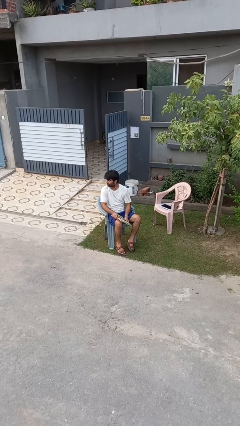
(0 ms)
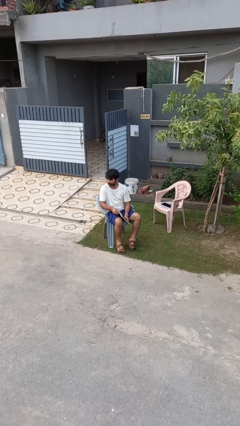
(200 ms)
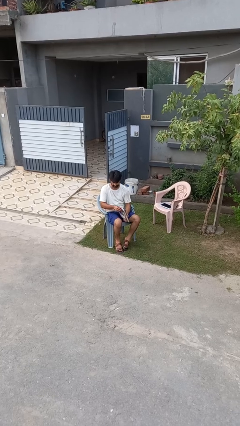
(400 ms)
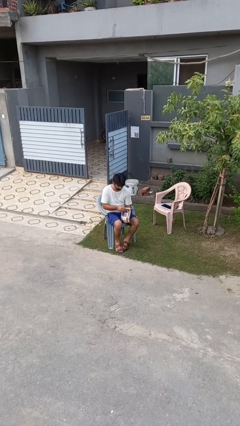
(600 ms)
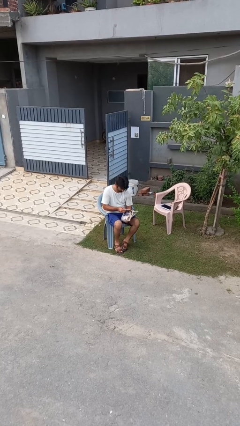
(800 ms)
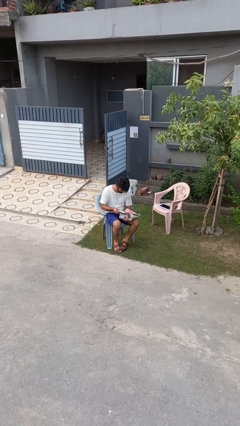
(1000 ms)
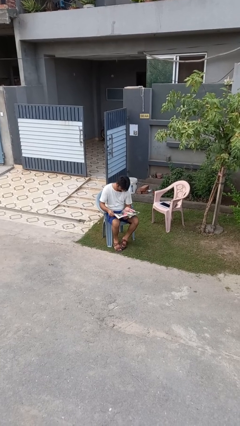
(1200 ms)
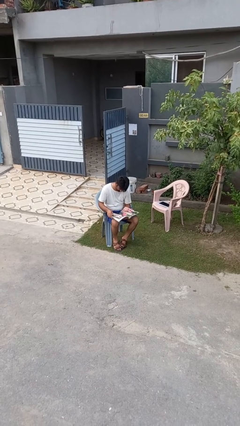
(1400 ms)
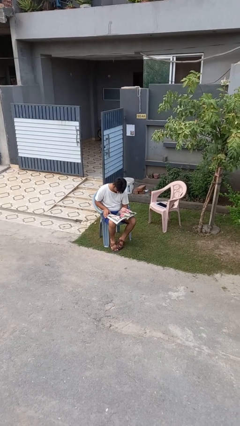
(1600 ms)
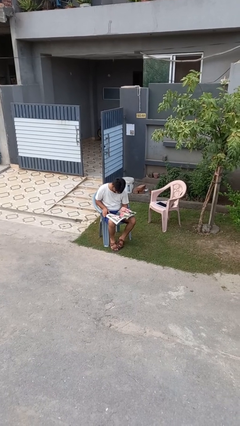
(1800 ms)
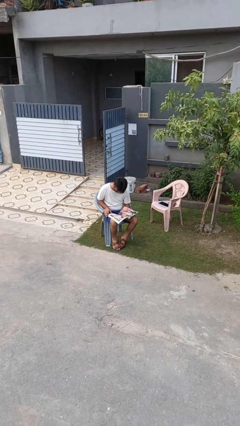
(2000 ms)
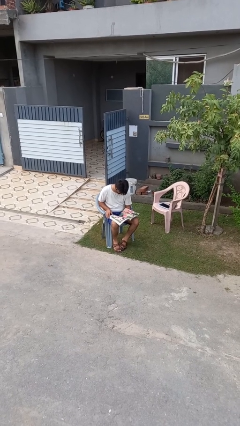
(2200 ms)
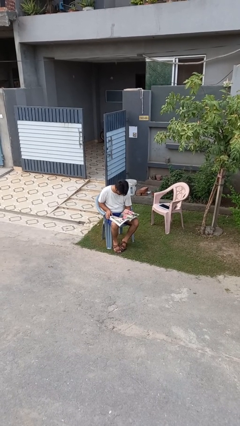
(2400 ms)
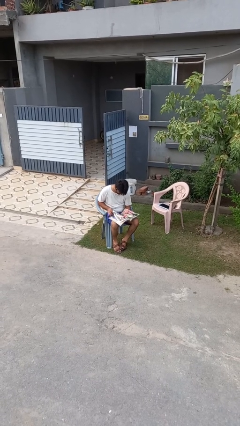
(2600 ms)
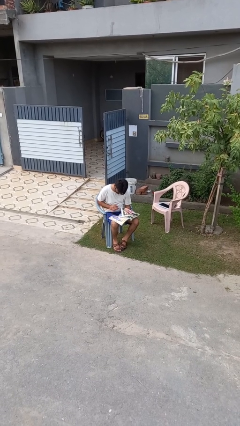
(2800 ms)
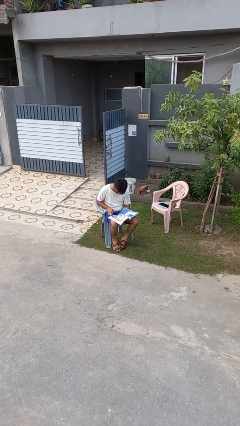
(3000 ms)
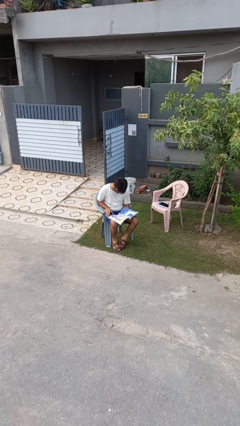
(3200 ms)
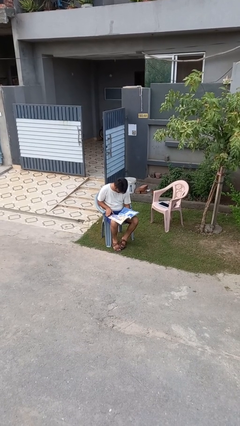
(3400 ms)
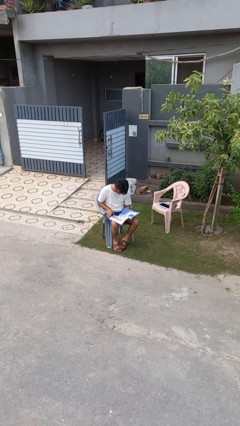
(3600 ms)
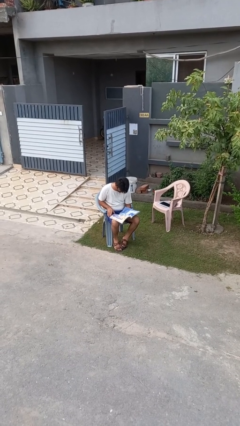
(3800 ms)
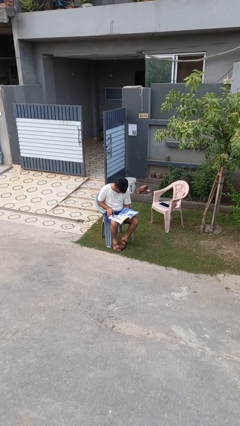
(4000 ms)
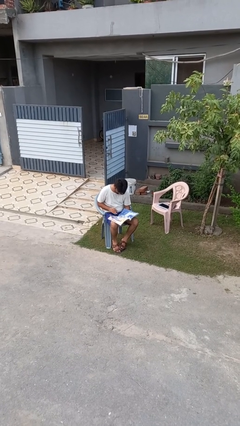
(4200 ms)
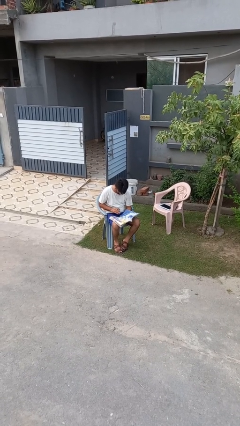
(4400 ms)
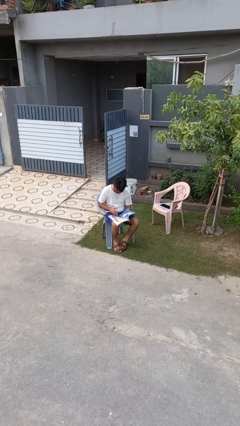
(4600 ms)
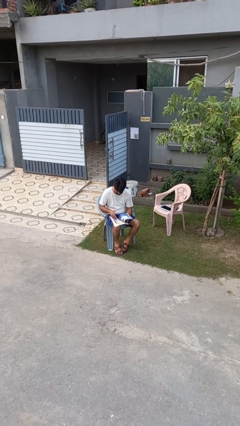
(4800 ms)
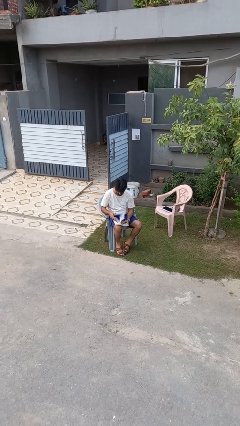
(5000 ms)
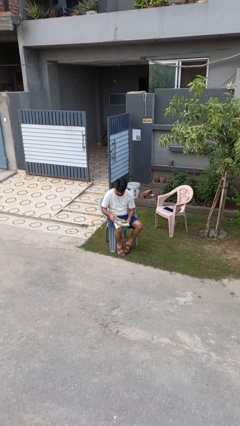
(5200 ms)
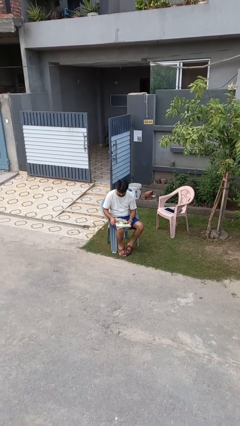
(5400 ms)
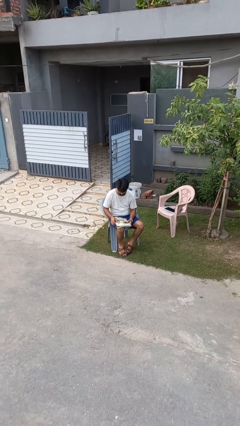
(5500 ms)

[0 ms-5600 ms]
person reads magazine

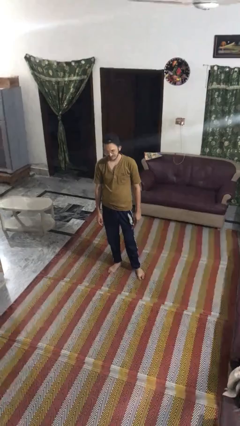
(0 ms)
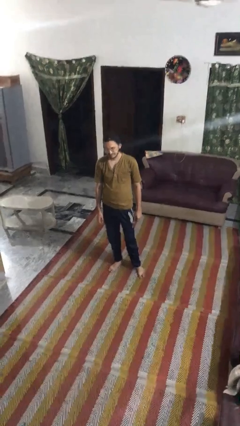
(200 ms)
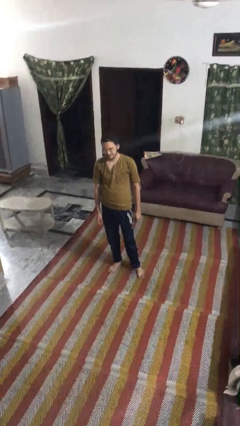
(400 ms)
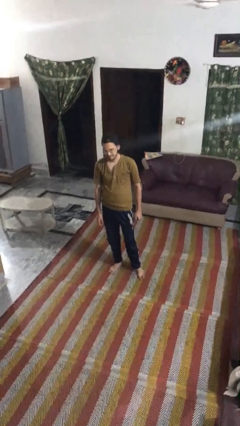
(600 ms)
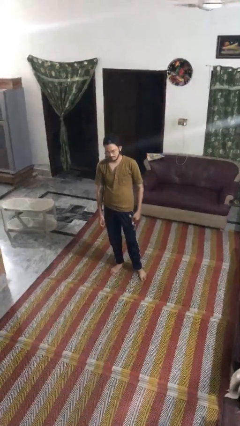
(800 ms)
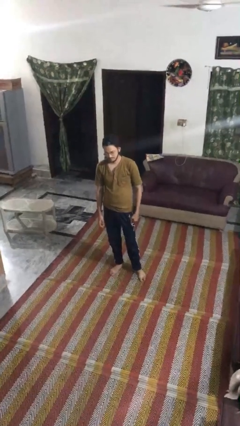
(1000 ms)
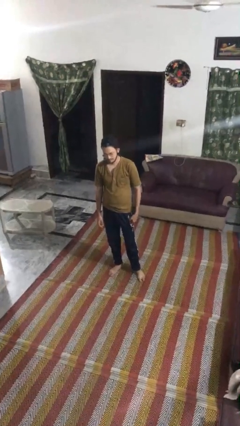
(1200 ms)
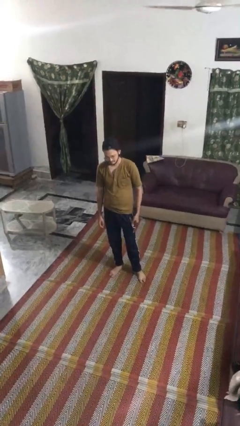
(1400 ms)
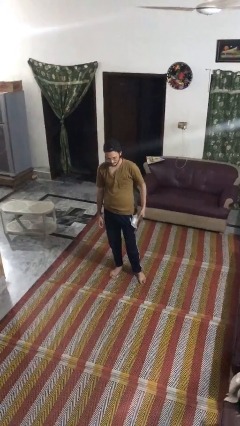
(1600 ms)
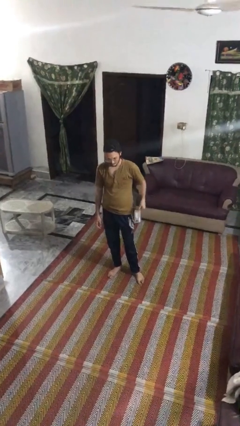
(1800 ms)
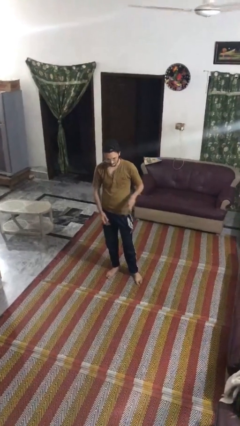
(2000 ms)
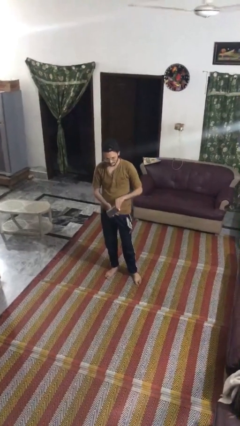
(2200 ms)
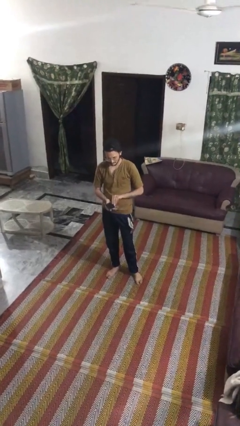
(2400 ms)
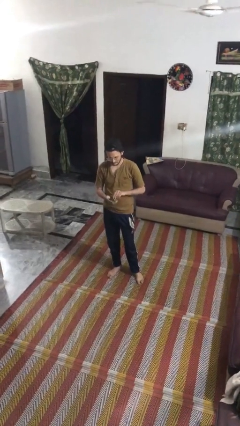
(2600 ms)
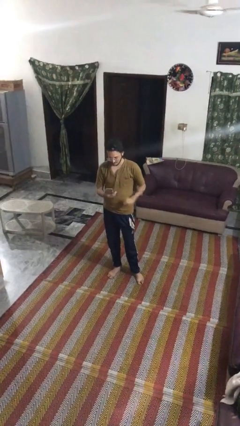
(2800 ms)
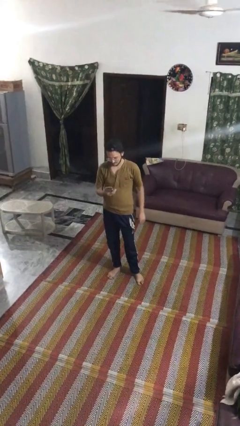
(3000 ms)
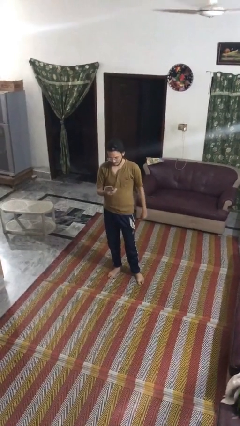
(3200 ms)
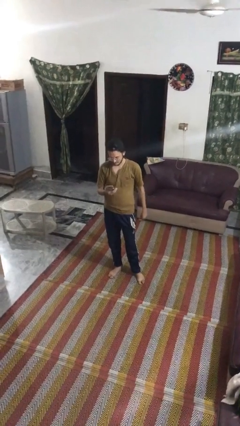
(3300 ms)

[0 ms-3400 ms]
person takes phone from pocket

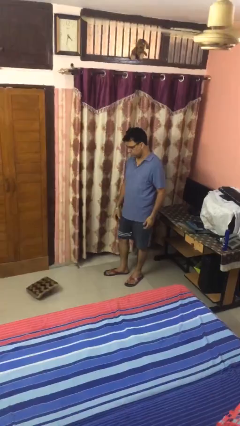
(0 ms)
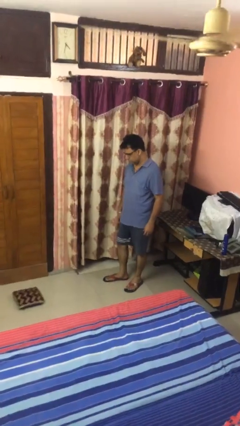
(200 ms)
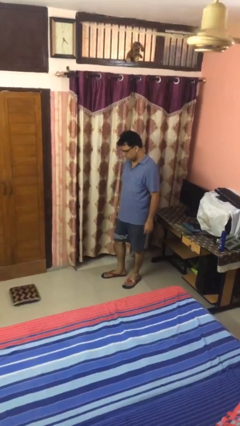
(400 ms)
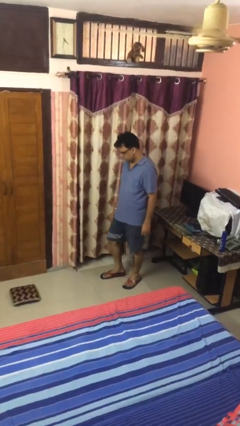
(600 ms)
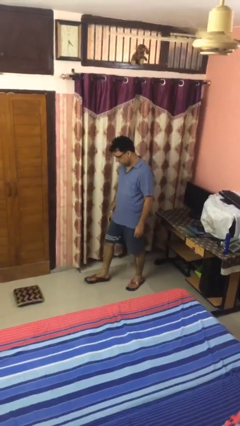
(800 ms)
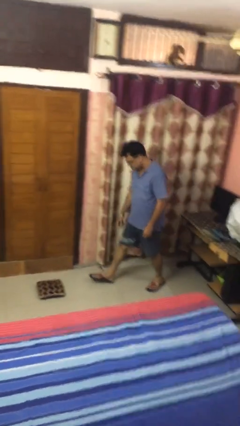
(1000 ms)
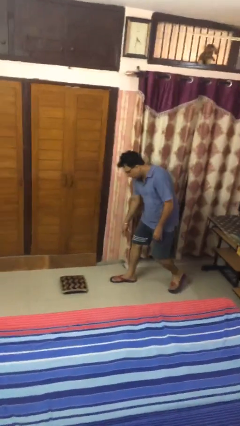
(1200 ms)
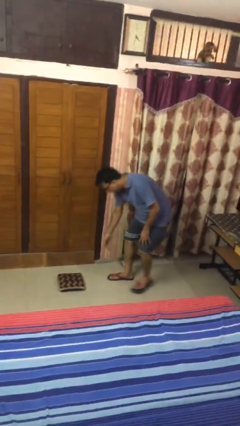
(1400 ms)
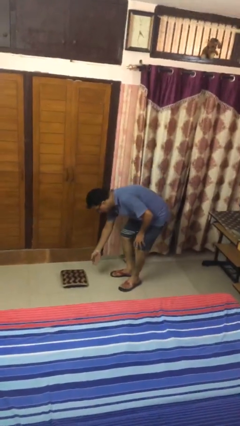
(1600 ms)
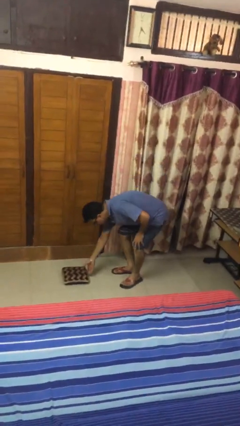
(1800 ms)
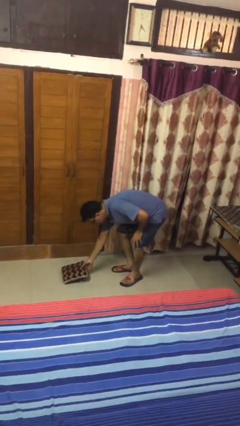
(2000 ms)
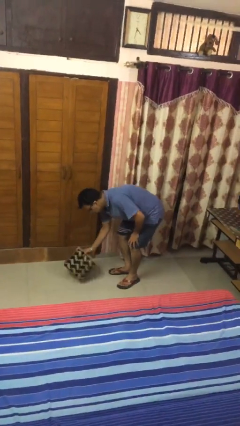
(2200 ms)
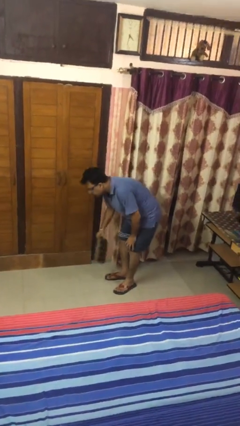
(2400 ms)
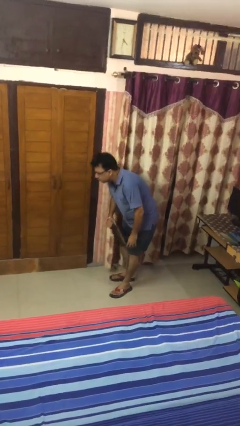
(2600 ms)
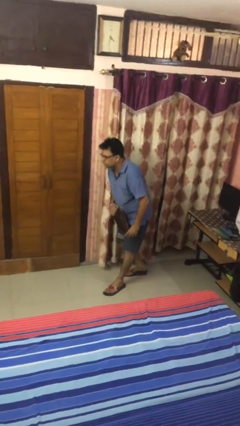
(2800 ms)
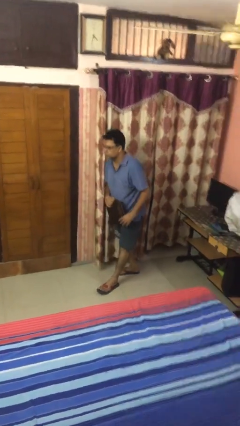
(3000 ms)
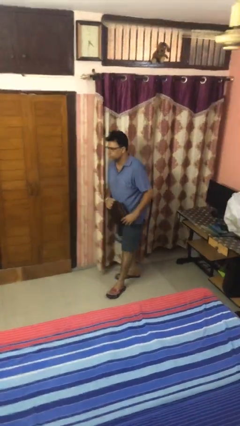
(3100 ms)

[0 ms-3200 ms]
person picks up object from floor

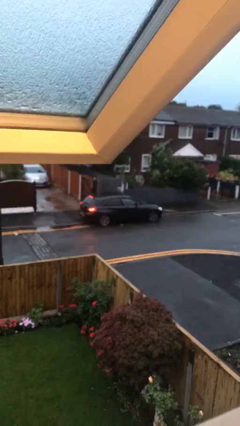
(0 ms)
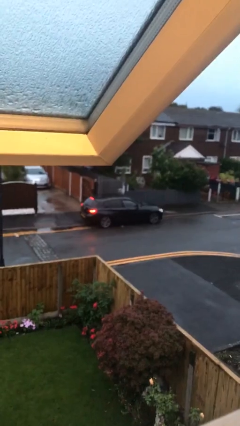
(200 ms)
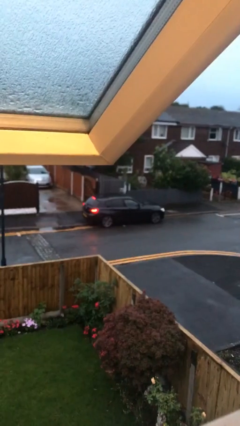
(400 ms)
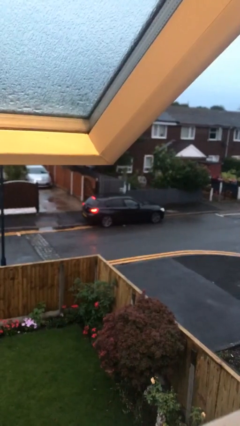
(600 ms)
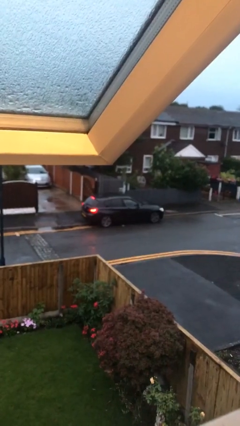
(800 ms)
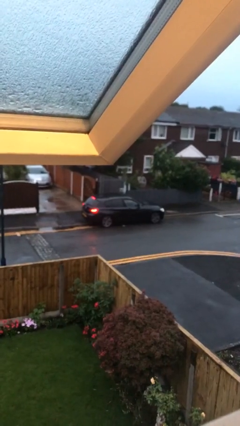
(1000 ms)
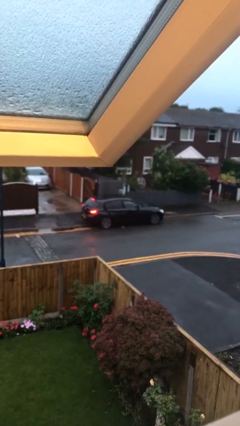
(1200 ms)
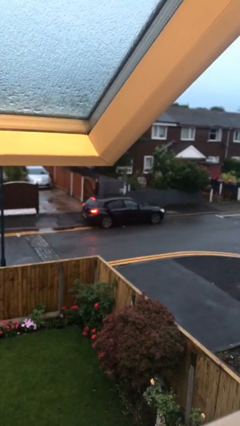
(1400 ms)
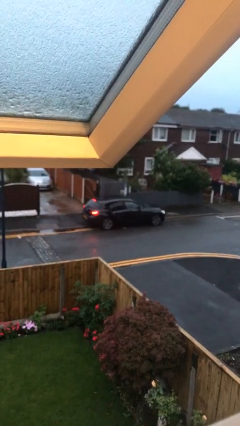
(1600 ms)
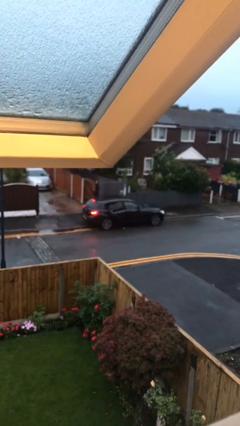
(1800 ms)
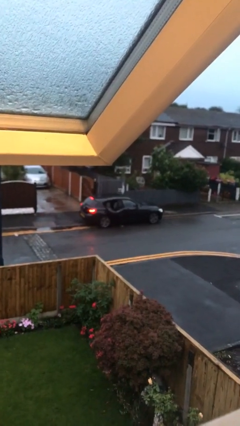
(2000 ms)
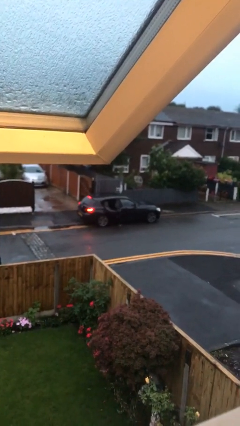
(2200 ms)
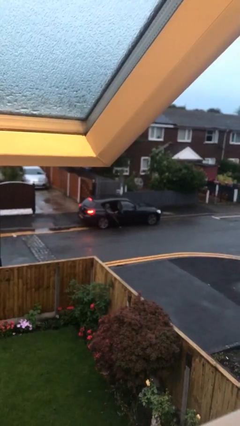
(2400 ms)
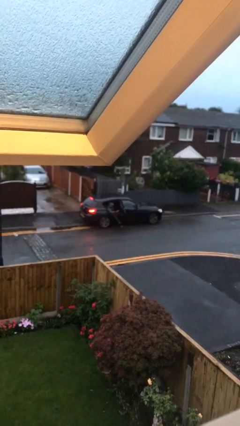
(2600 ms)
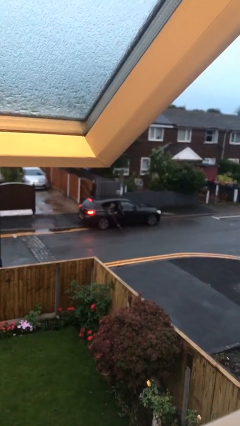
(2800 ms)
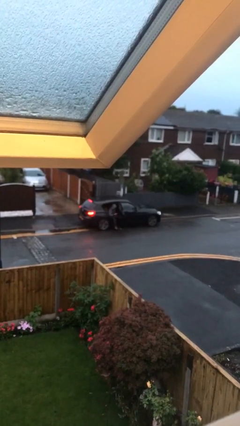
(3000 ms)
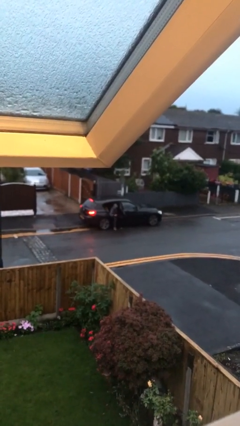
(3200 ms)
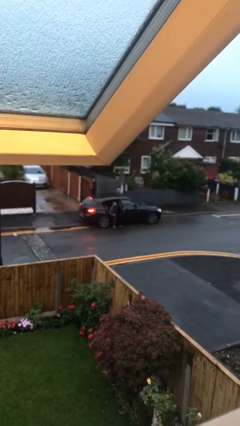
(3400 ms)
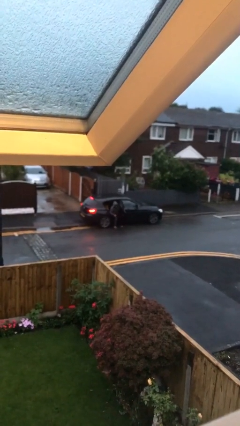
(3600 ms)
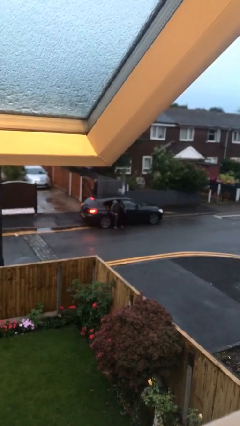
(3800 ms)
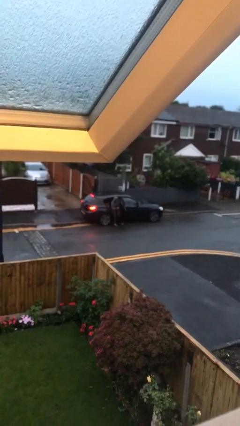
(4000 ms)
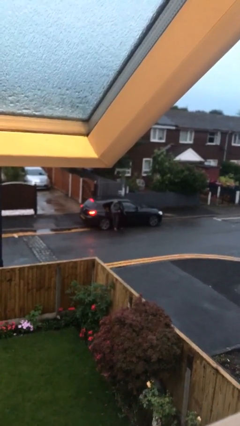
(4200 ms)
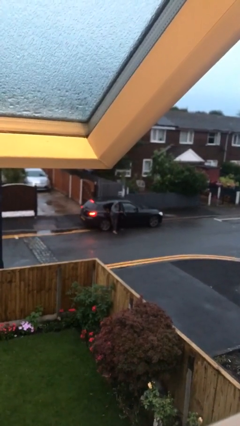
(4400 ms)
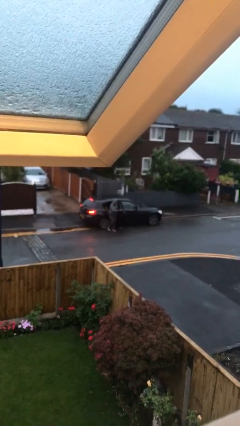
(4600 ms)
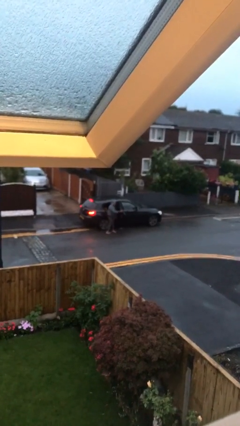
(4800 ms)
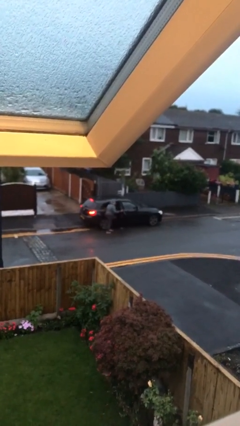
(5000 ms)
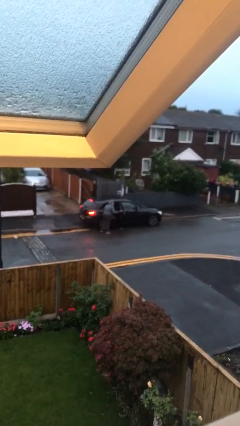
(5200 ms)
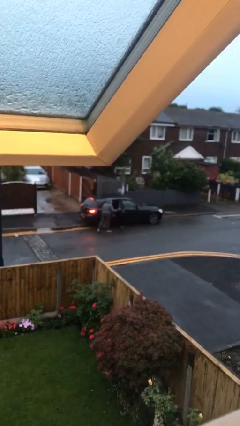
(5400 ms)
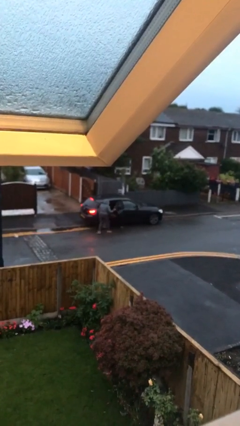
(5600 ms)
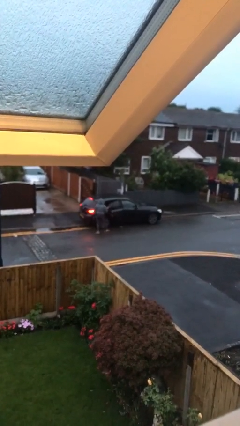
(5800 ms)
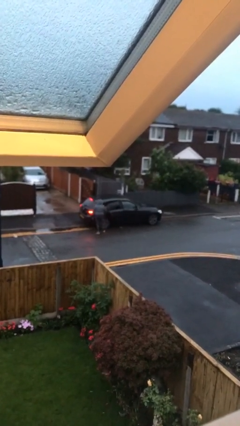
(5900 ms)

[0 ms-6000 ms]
car drops off person
